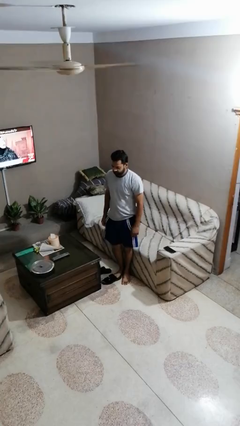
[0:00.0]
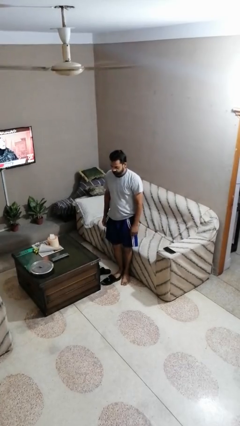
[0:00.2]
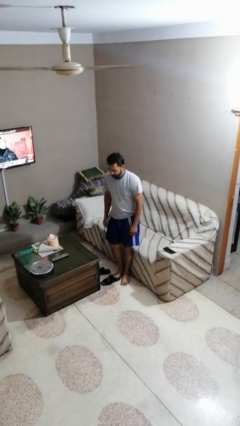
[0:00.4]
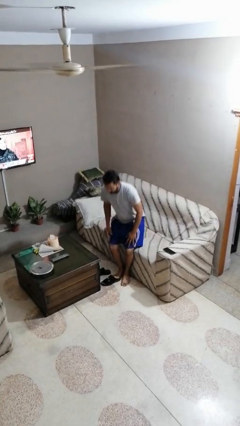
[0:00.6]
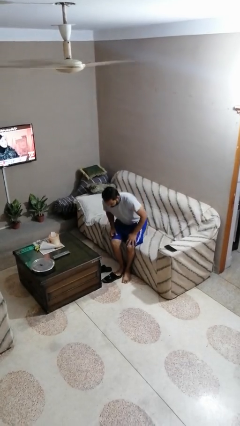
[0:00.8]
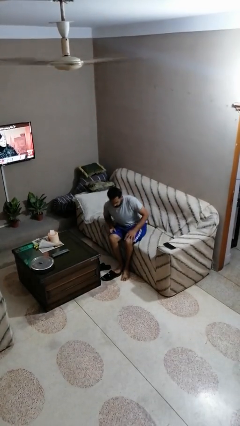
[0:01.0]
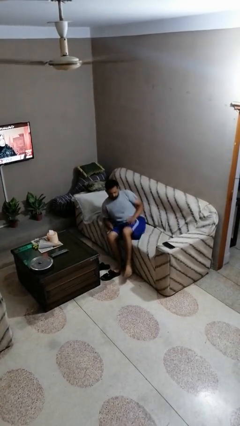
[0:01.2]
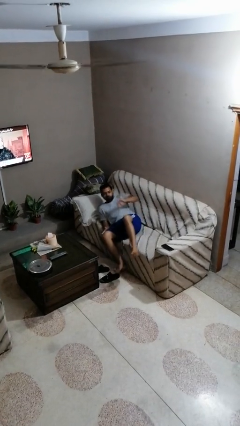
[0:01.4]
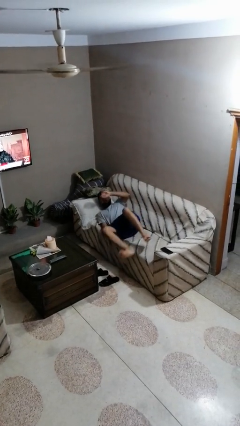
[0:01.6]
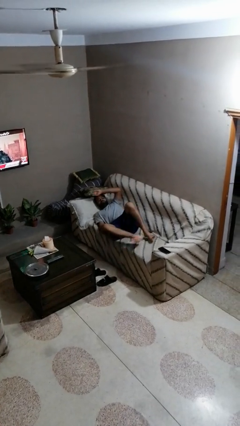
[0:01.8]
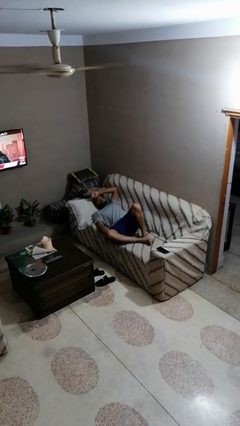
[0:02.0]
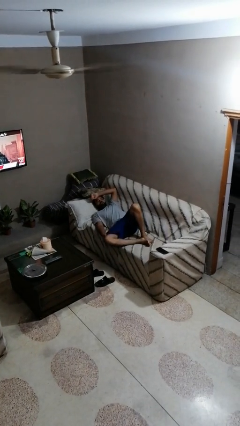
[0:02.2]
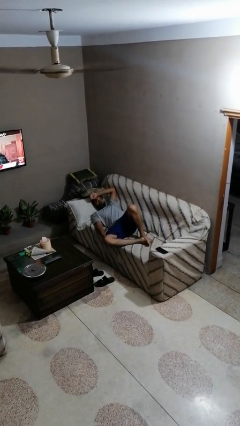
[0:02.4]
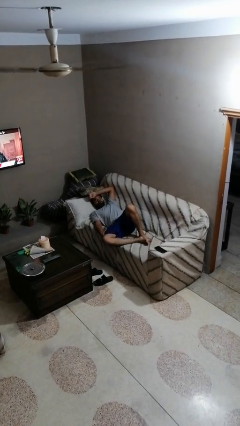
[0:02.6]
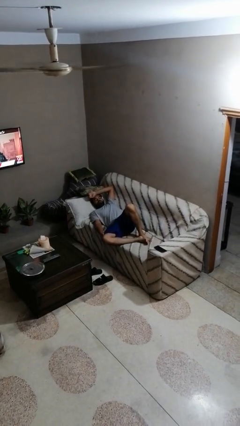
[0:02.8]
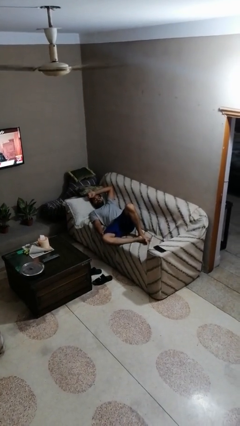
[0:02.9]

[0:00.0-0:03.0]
person lies down on couch

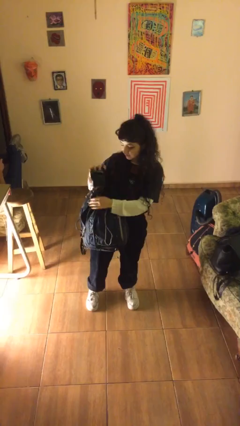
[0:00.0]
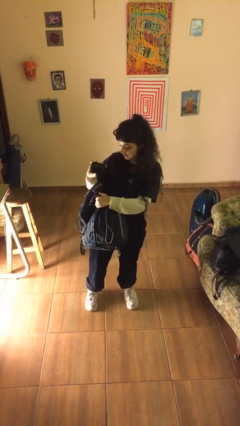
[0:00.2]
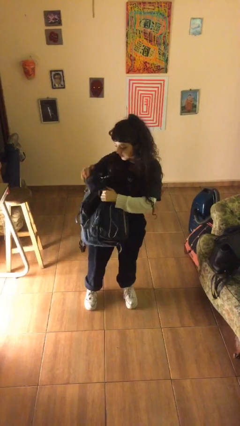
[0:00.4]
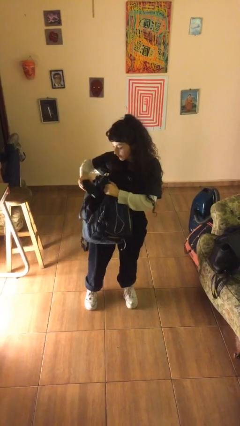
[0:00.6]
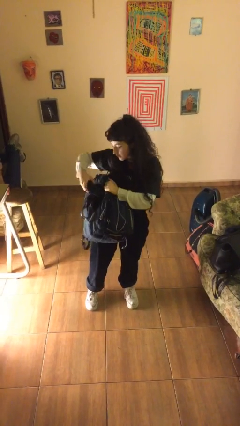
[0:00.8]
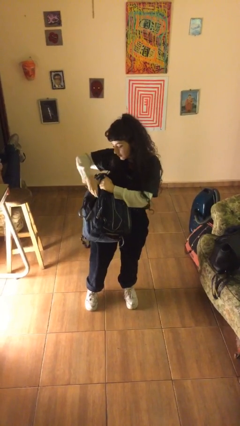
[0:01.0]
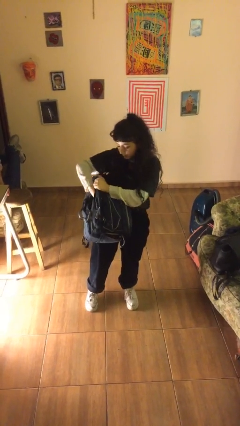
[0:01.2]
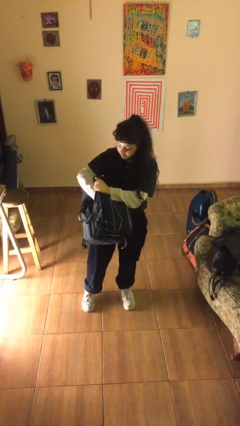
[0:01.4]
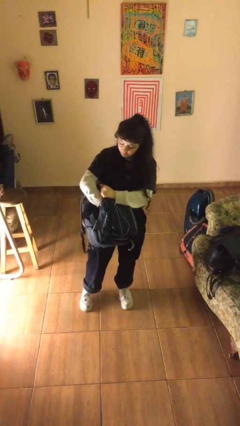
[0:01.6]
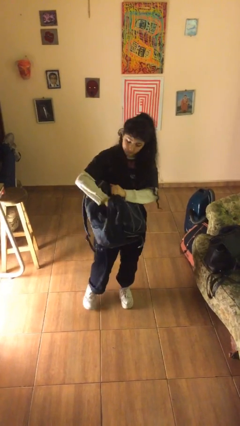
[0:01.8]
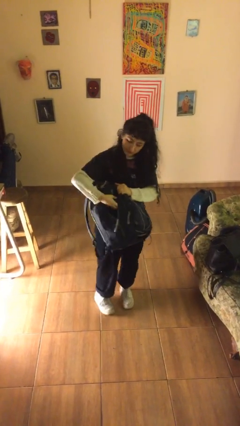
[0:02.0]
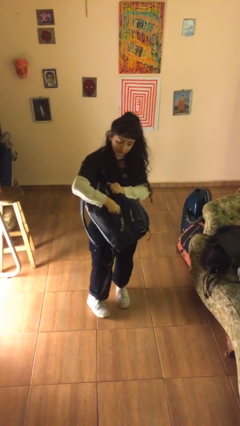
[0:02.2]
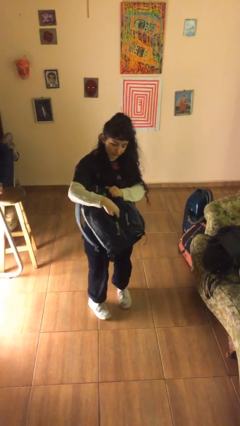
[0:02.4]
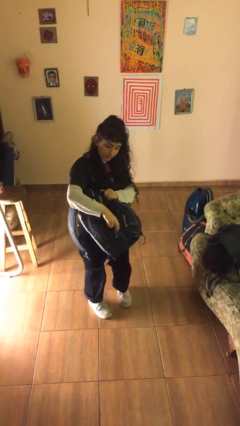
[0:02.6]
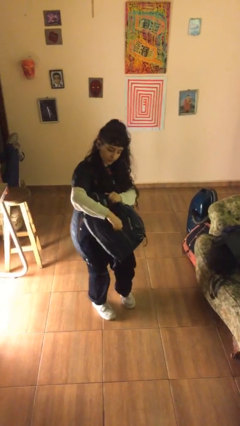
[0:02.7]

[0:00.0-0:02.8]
person puts object into backpack

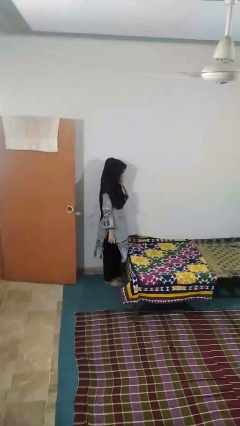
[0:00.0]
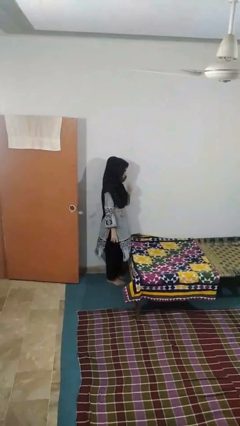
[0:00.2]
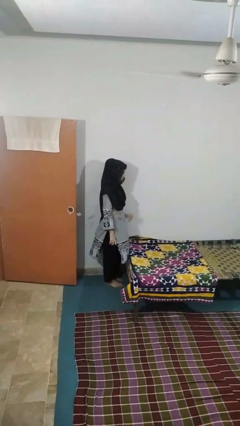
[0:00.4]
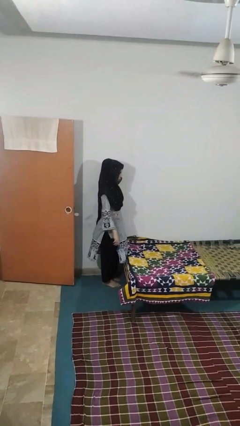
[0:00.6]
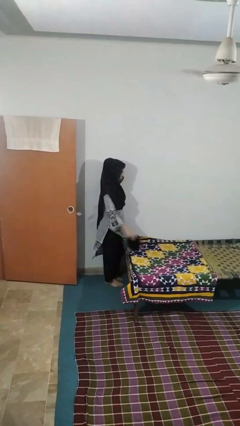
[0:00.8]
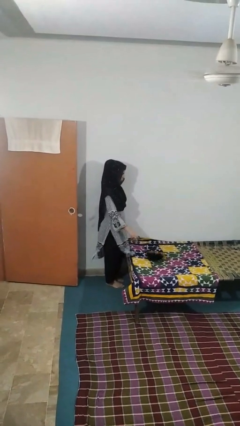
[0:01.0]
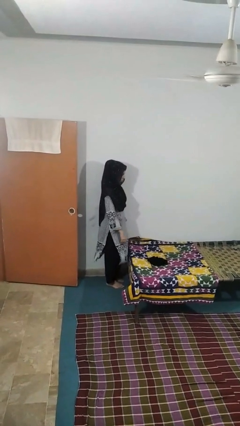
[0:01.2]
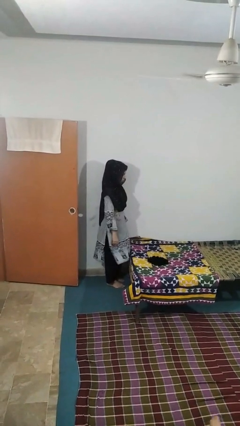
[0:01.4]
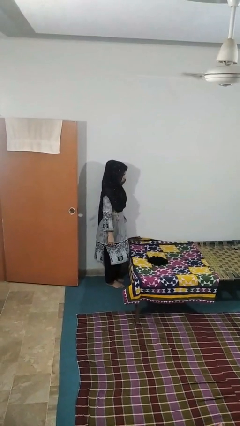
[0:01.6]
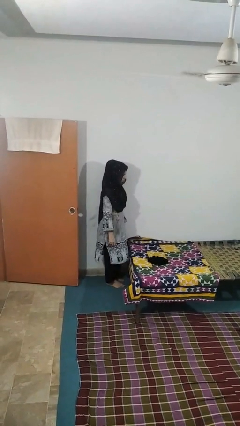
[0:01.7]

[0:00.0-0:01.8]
person throws object on bed

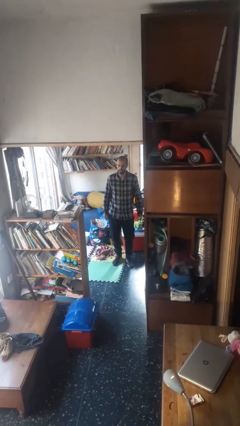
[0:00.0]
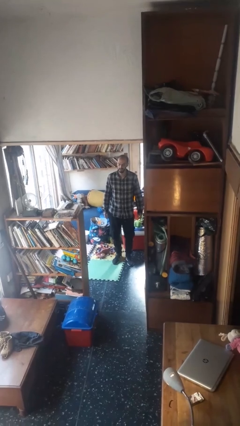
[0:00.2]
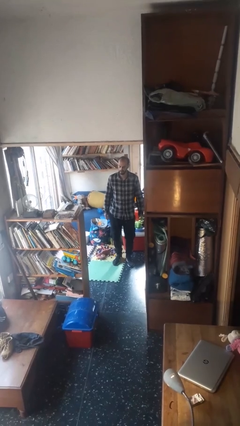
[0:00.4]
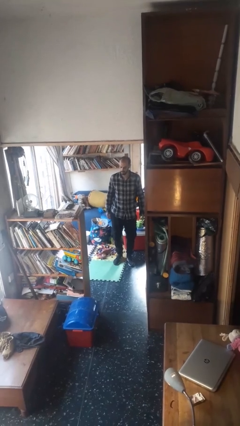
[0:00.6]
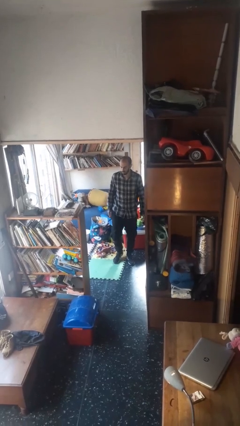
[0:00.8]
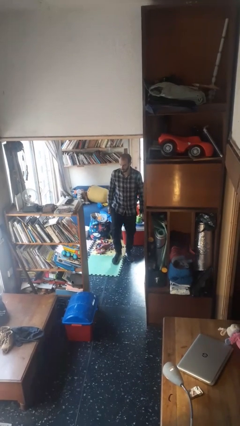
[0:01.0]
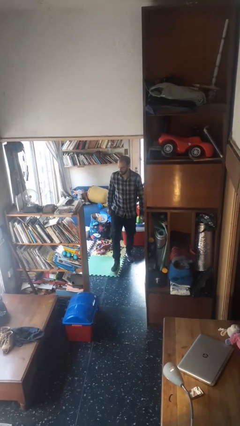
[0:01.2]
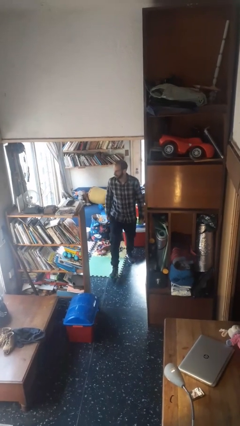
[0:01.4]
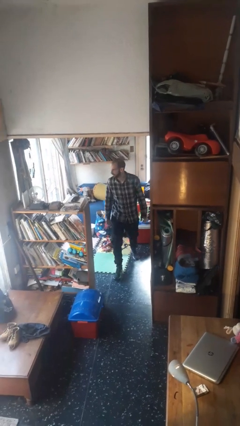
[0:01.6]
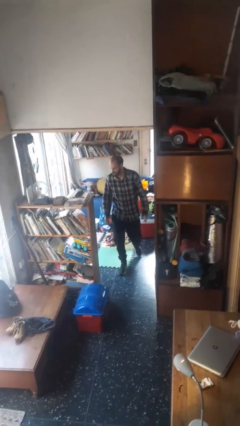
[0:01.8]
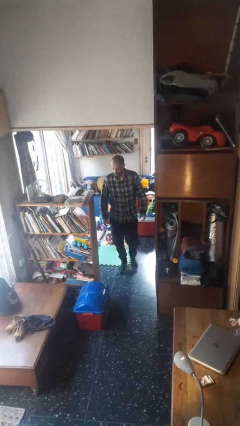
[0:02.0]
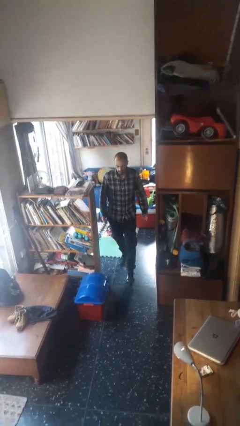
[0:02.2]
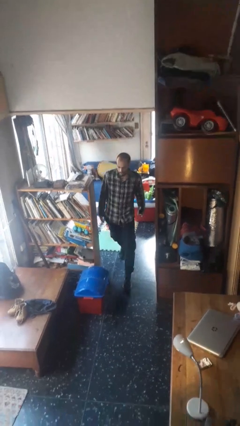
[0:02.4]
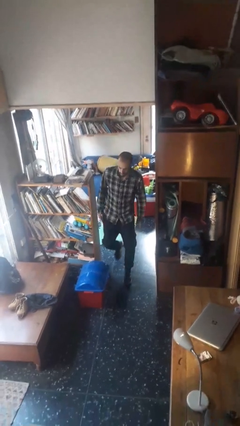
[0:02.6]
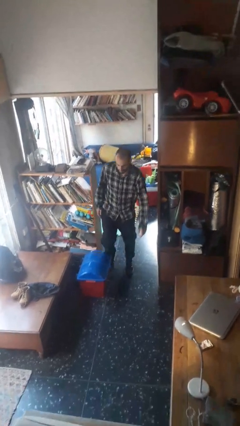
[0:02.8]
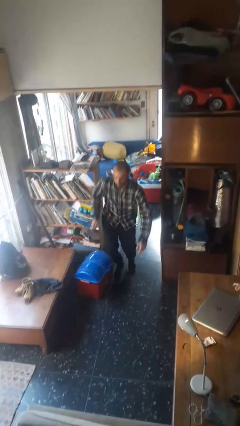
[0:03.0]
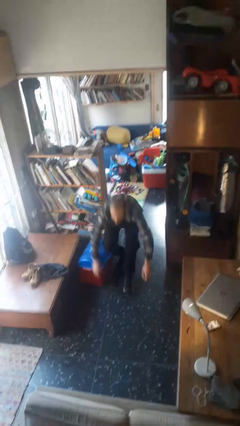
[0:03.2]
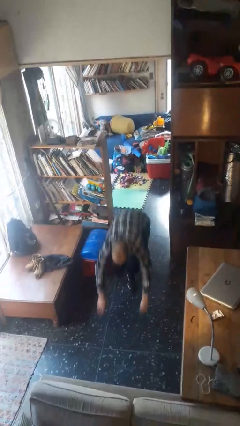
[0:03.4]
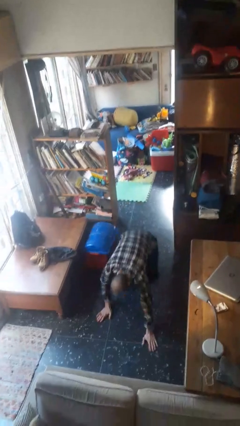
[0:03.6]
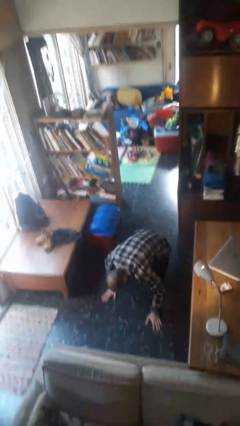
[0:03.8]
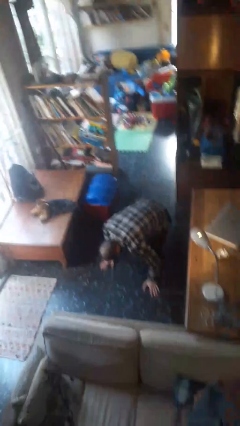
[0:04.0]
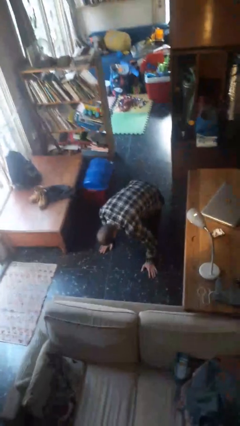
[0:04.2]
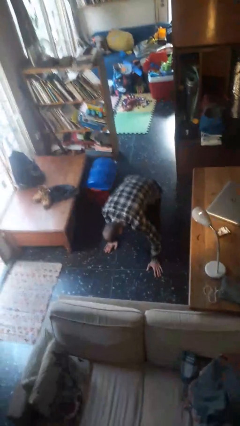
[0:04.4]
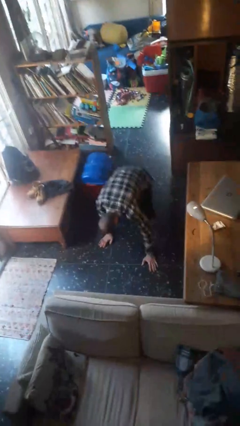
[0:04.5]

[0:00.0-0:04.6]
person trips on object on floor

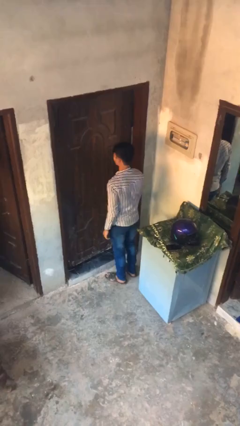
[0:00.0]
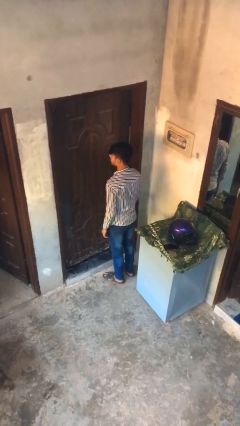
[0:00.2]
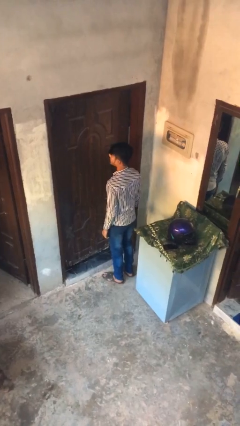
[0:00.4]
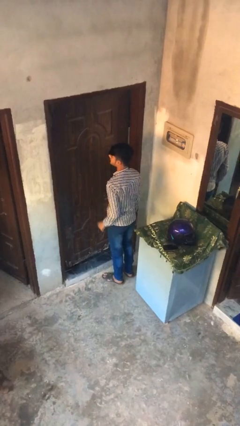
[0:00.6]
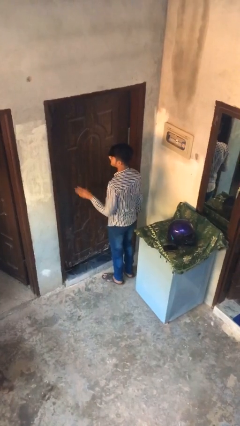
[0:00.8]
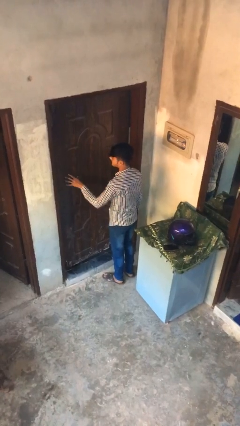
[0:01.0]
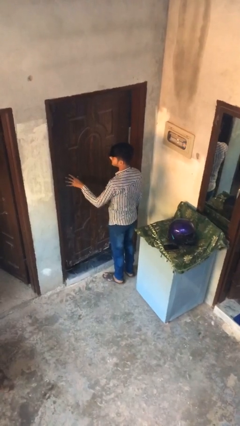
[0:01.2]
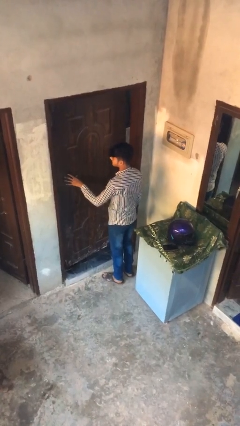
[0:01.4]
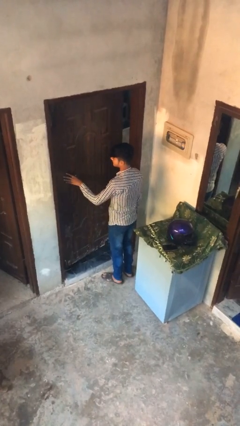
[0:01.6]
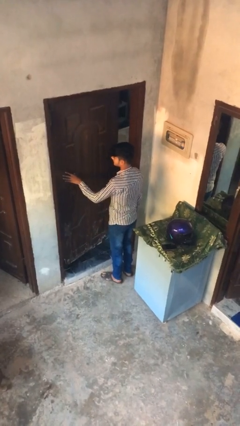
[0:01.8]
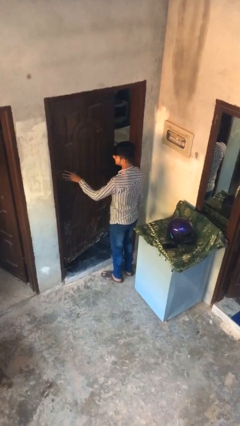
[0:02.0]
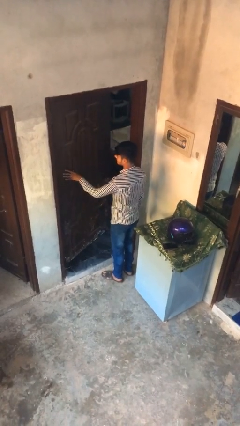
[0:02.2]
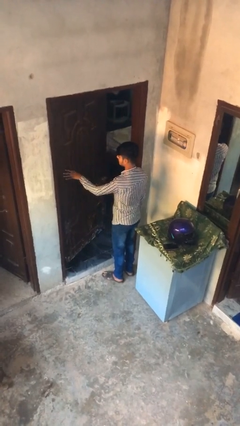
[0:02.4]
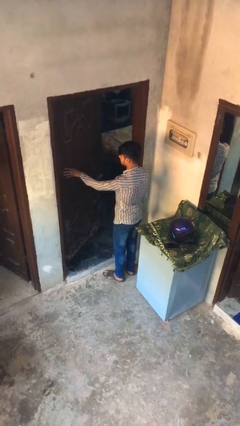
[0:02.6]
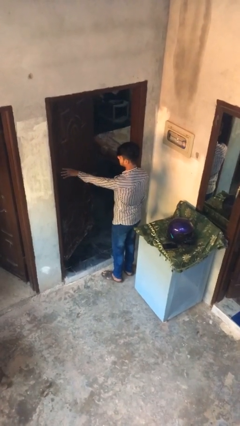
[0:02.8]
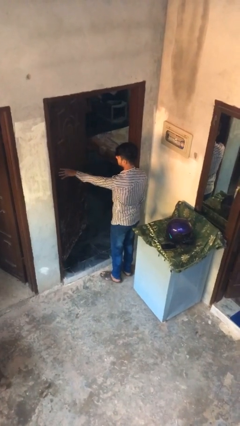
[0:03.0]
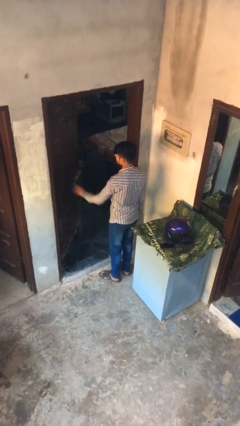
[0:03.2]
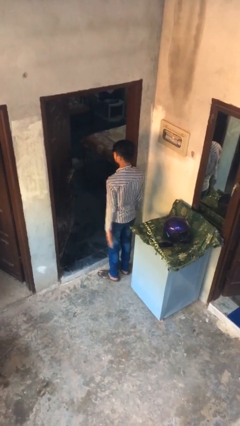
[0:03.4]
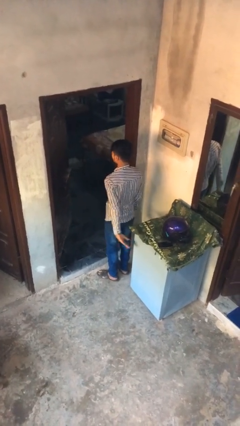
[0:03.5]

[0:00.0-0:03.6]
person opens facility door

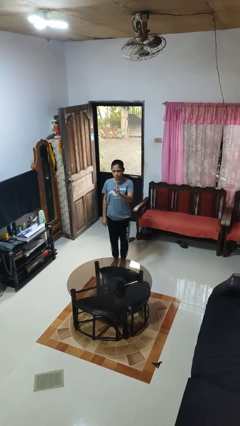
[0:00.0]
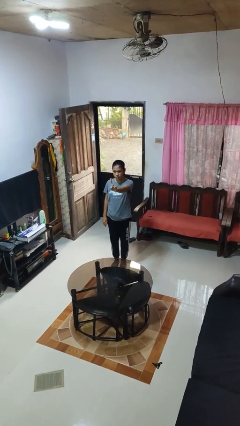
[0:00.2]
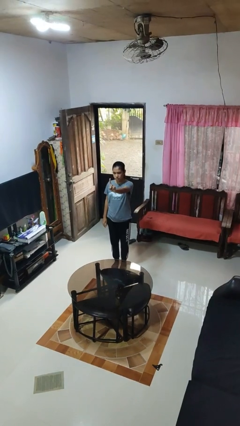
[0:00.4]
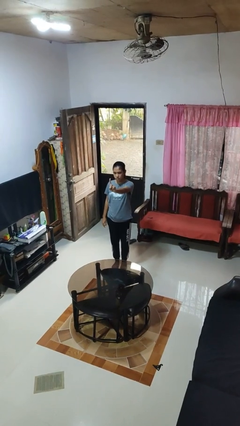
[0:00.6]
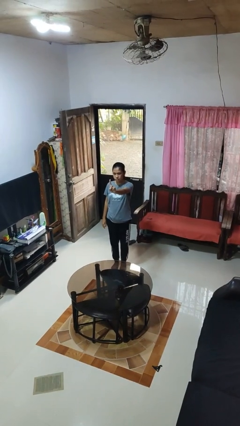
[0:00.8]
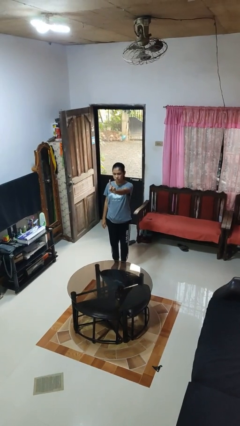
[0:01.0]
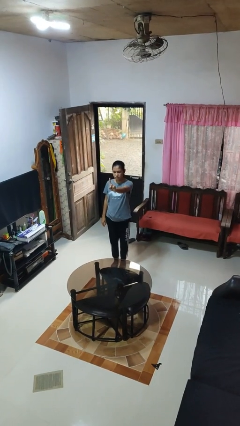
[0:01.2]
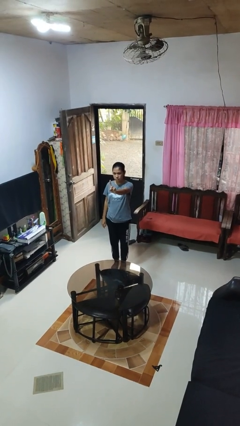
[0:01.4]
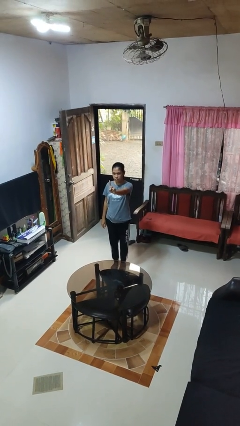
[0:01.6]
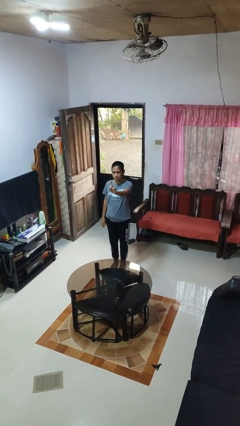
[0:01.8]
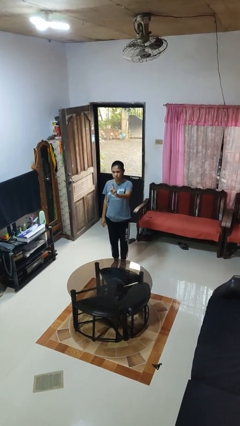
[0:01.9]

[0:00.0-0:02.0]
person gestures number one
